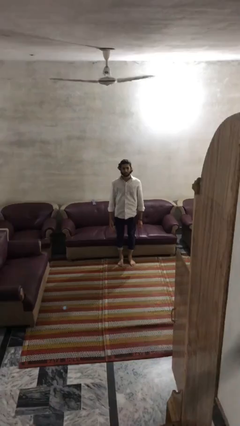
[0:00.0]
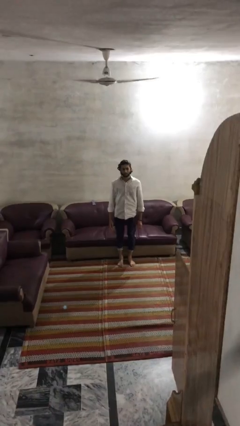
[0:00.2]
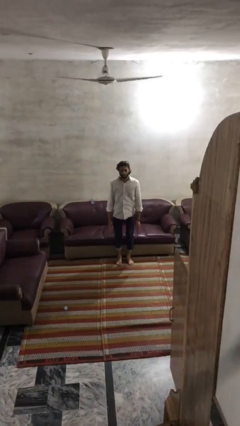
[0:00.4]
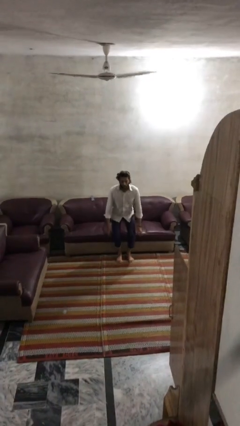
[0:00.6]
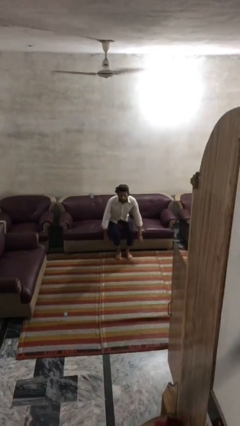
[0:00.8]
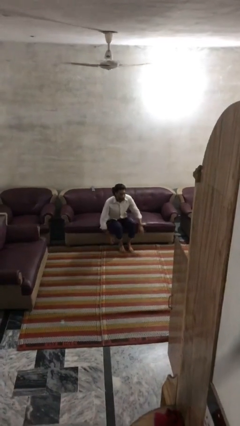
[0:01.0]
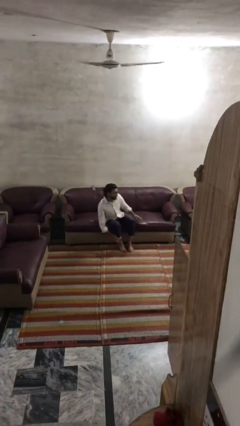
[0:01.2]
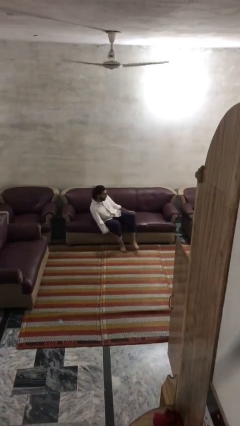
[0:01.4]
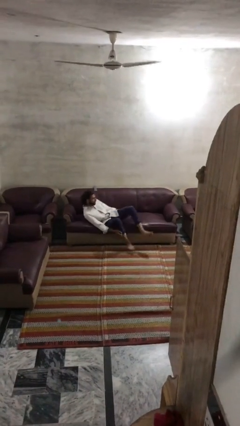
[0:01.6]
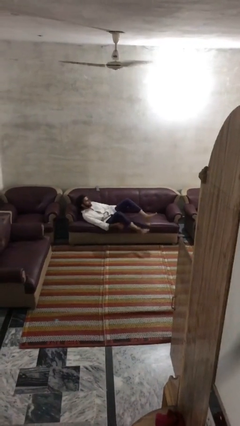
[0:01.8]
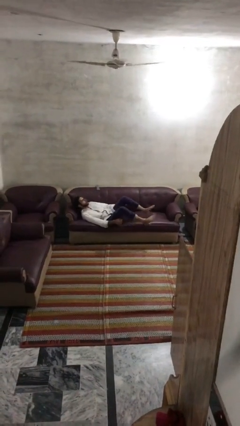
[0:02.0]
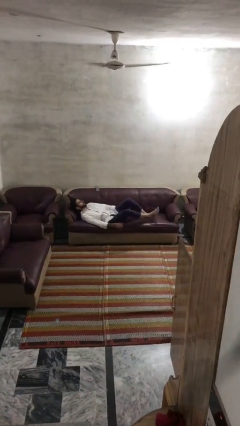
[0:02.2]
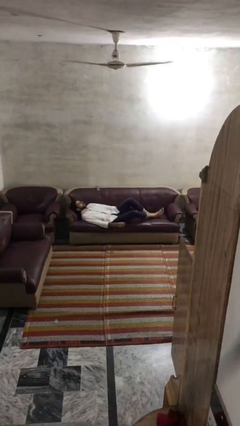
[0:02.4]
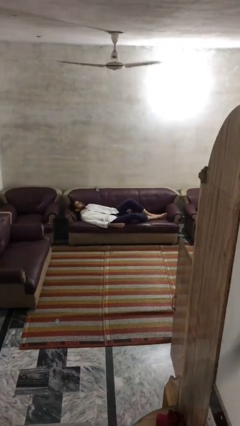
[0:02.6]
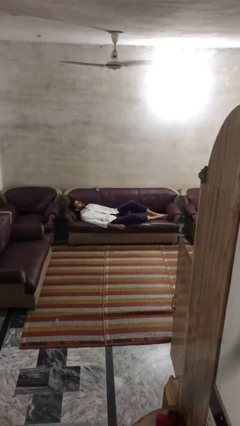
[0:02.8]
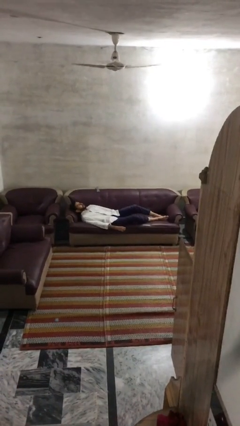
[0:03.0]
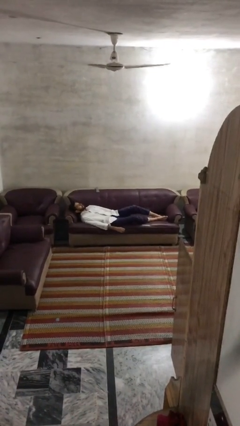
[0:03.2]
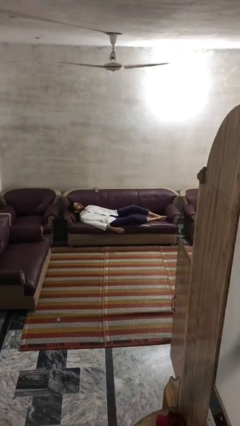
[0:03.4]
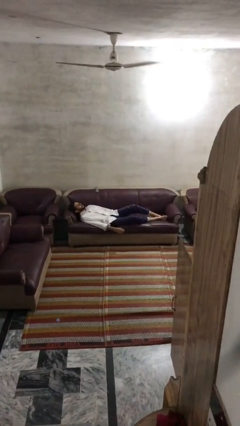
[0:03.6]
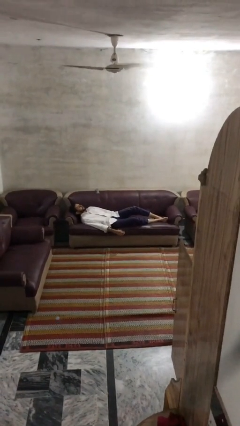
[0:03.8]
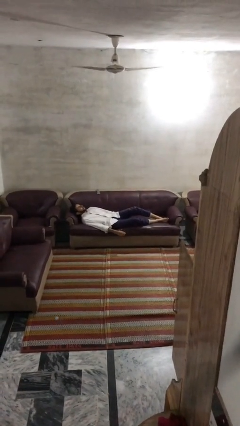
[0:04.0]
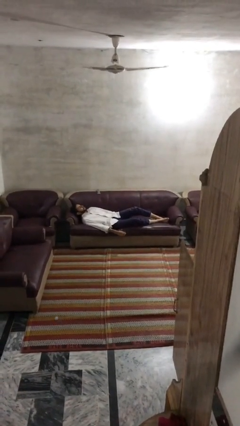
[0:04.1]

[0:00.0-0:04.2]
person lies down on couch

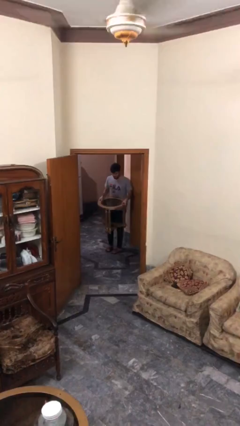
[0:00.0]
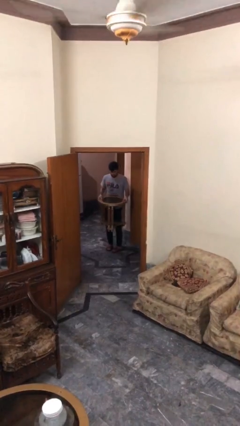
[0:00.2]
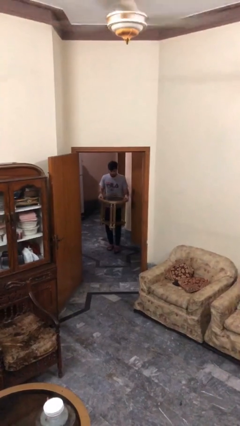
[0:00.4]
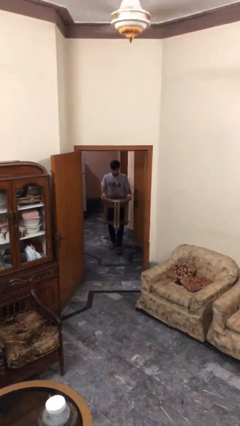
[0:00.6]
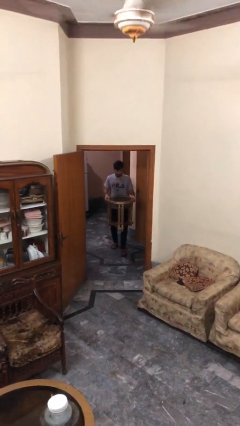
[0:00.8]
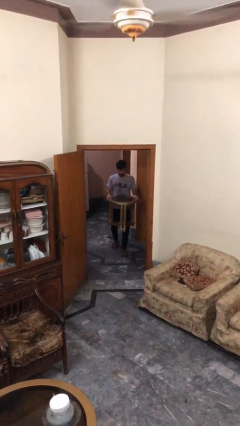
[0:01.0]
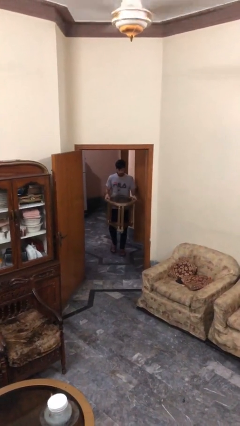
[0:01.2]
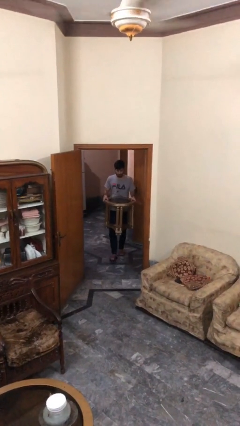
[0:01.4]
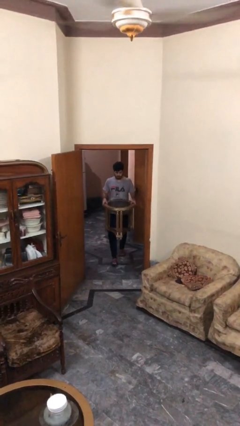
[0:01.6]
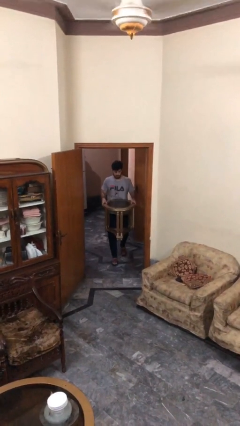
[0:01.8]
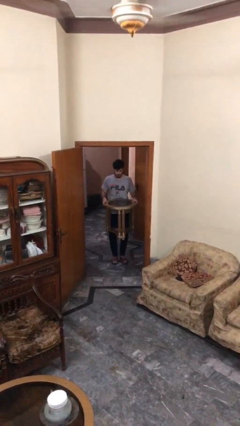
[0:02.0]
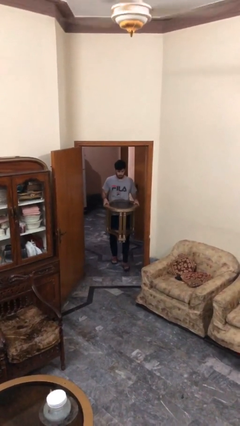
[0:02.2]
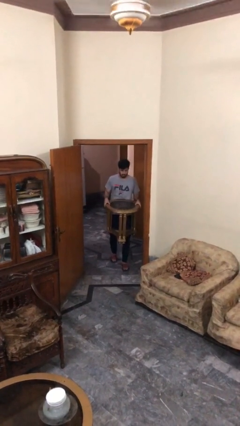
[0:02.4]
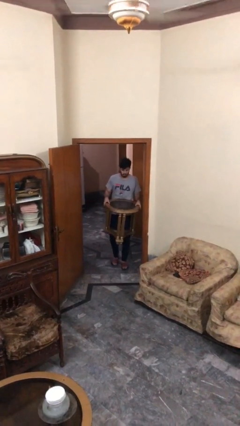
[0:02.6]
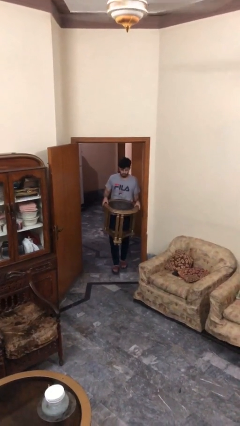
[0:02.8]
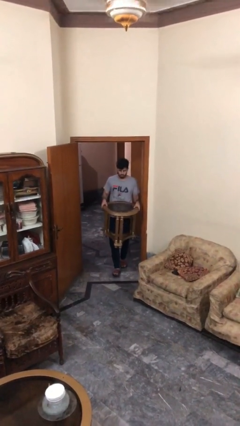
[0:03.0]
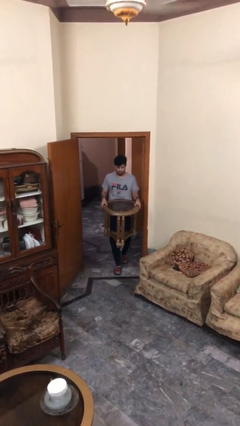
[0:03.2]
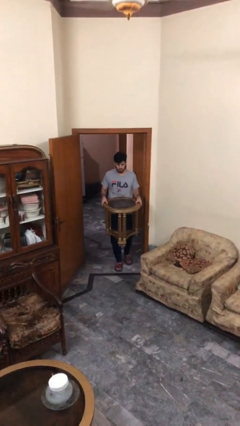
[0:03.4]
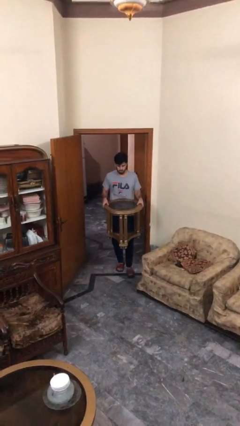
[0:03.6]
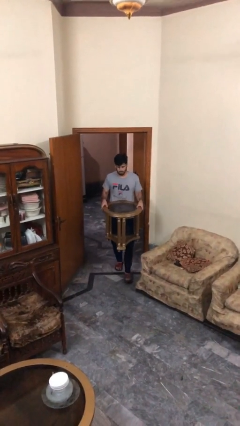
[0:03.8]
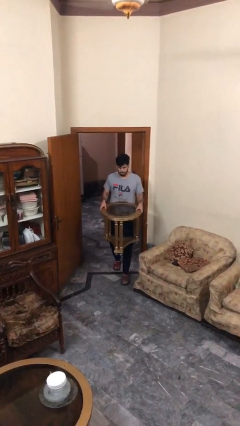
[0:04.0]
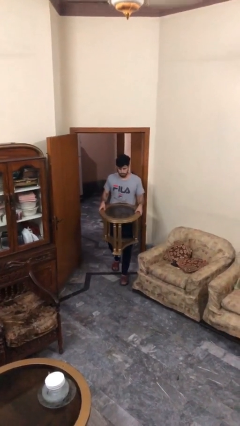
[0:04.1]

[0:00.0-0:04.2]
person carries furniture

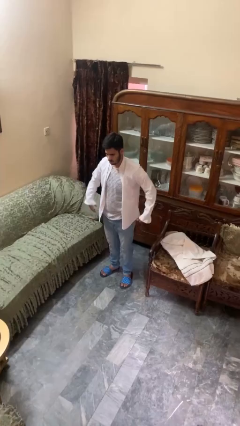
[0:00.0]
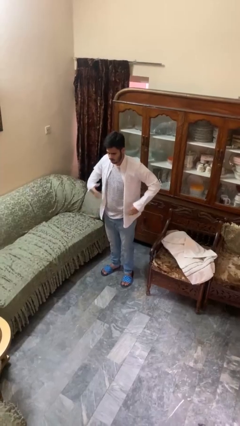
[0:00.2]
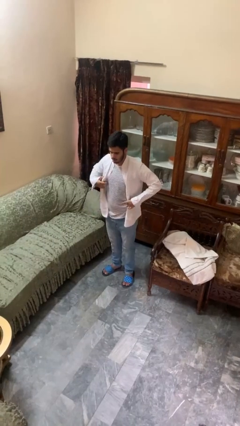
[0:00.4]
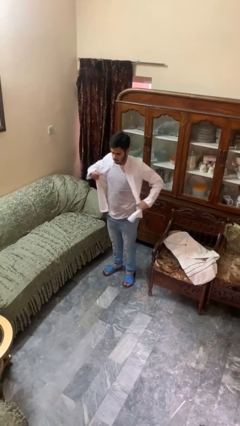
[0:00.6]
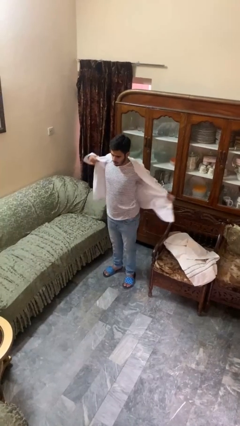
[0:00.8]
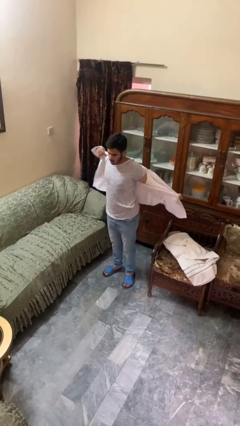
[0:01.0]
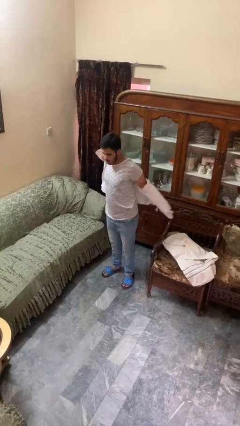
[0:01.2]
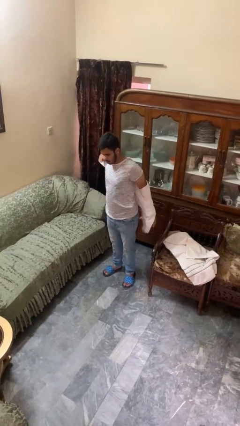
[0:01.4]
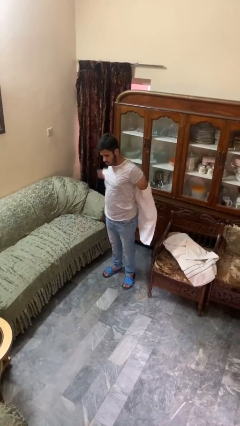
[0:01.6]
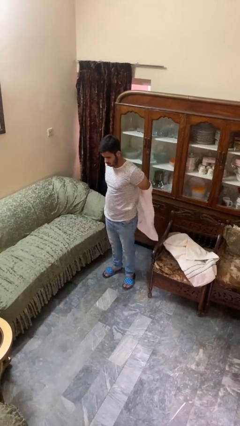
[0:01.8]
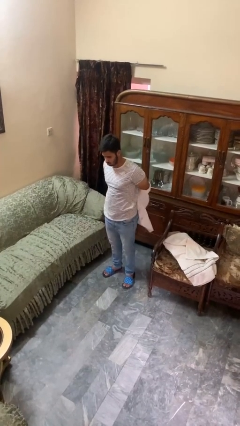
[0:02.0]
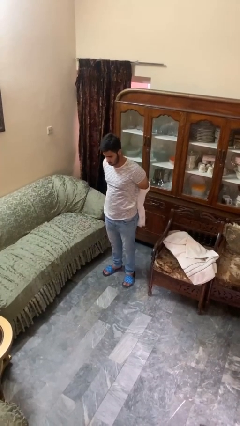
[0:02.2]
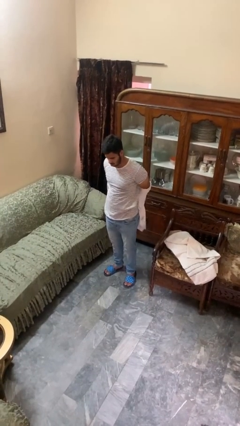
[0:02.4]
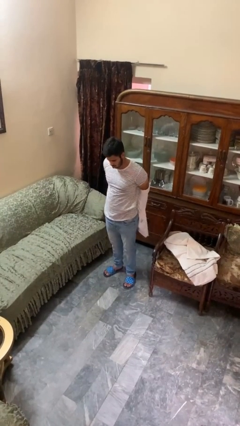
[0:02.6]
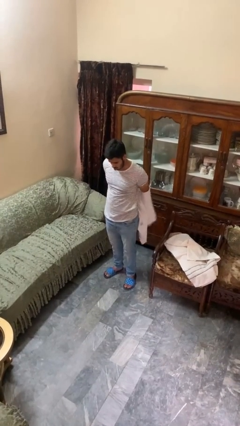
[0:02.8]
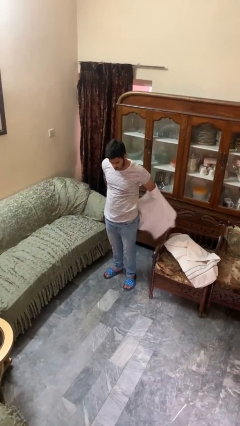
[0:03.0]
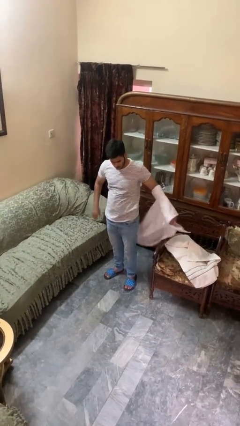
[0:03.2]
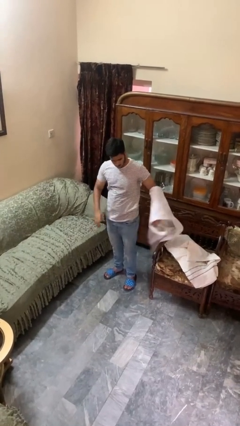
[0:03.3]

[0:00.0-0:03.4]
person takes off shirt

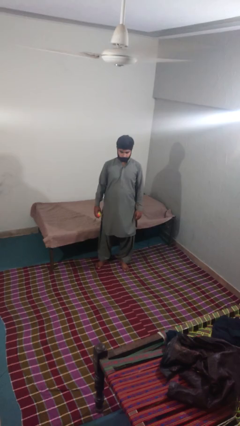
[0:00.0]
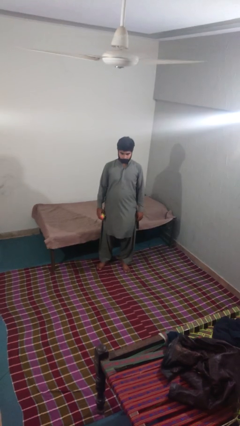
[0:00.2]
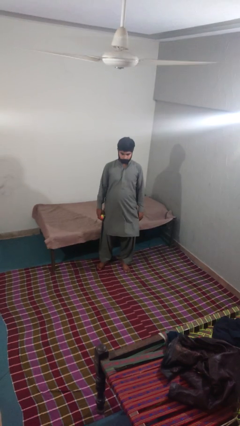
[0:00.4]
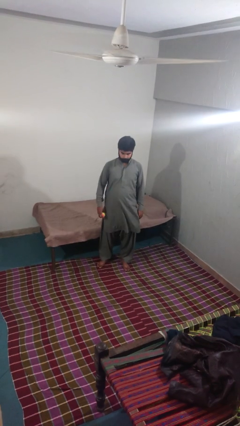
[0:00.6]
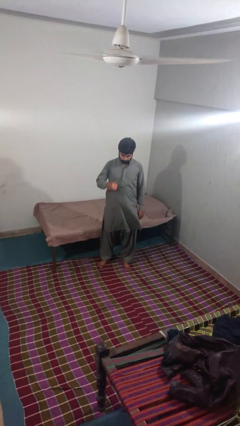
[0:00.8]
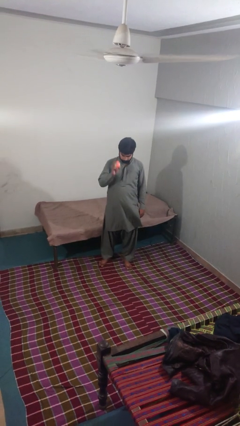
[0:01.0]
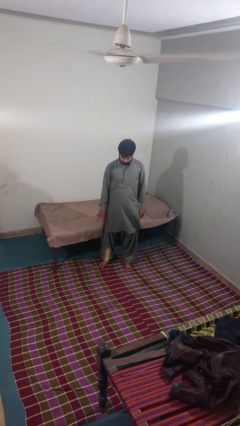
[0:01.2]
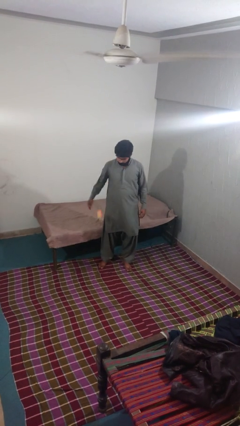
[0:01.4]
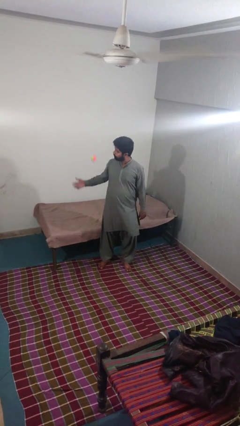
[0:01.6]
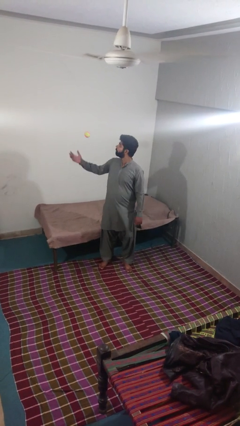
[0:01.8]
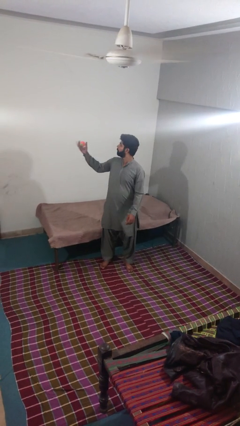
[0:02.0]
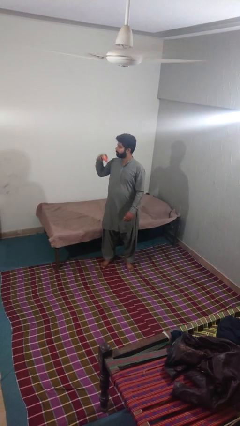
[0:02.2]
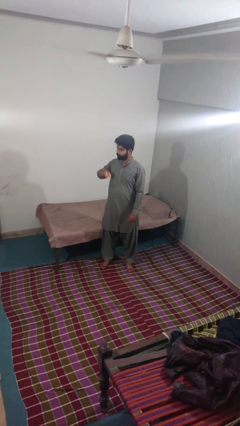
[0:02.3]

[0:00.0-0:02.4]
person bounces ball on floor

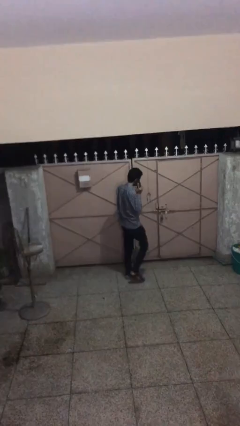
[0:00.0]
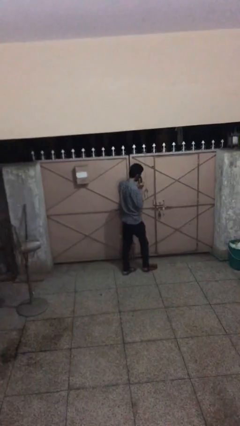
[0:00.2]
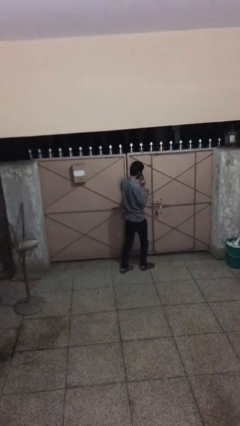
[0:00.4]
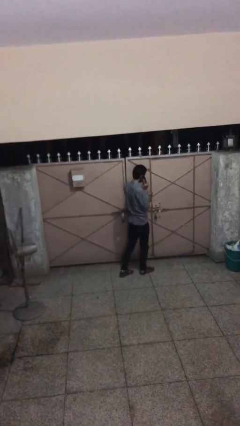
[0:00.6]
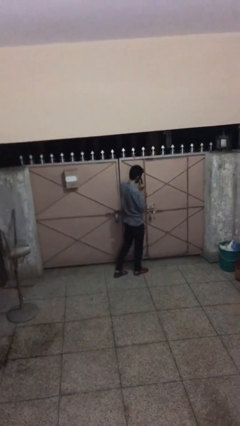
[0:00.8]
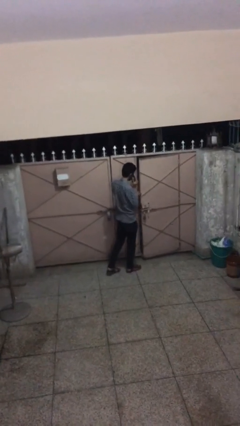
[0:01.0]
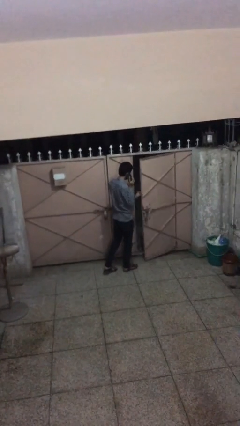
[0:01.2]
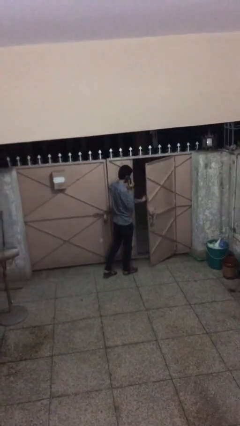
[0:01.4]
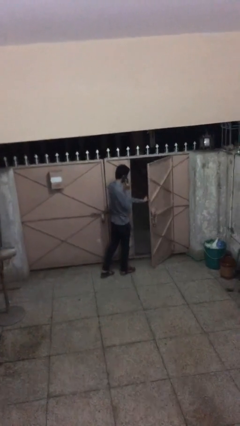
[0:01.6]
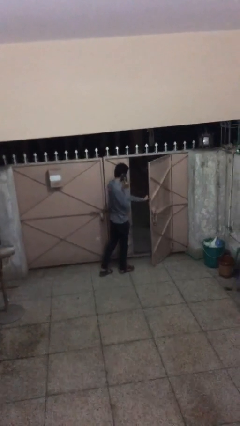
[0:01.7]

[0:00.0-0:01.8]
person opens facility door

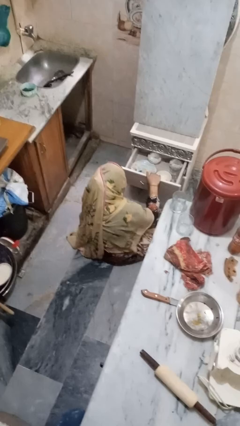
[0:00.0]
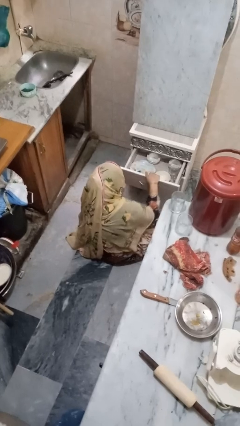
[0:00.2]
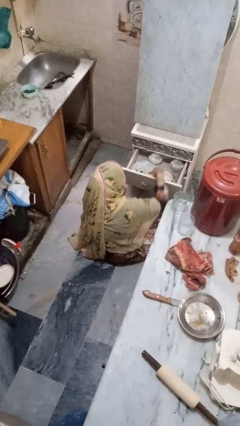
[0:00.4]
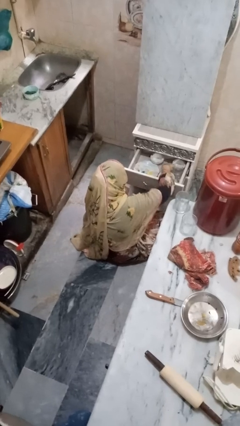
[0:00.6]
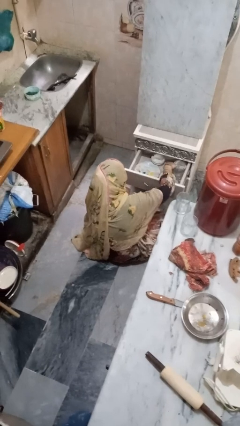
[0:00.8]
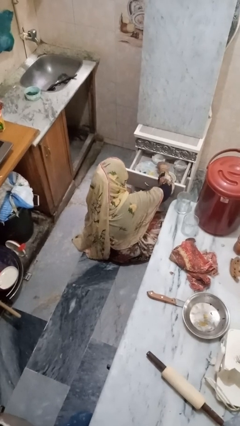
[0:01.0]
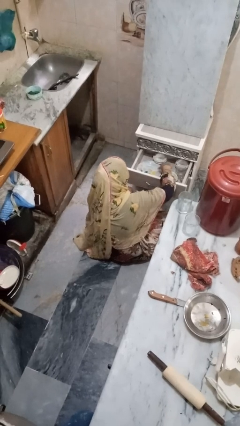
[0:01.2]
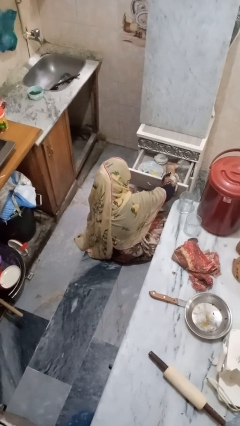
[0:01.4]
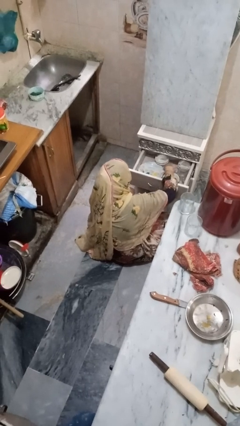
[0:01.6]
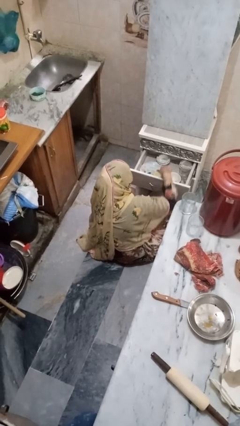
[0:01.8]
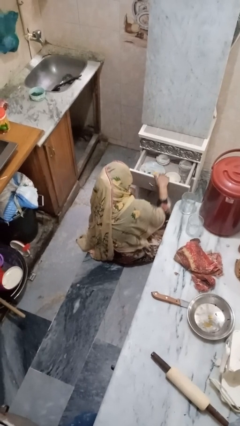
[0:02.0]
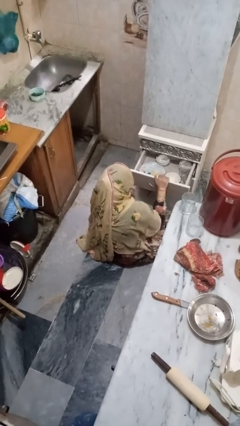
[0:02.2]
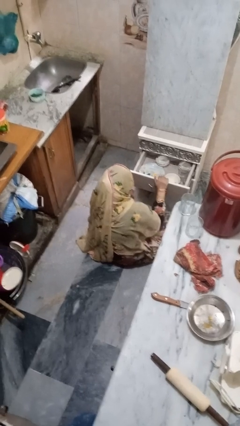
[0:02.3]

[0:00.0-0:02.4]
person searches in kitchen drawer
